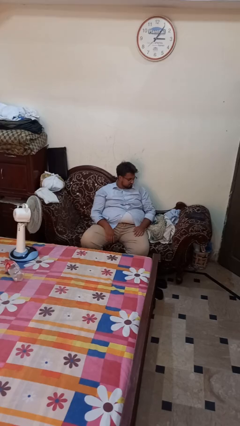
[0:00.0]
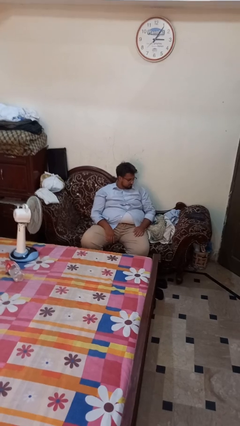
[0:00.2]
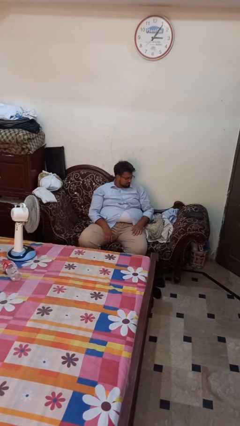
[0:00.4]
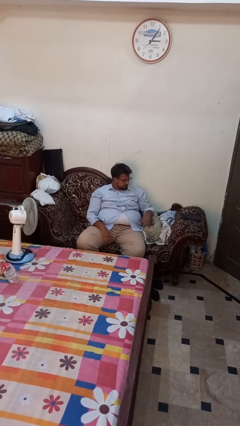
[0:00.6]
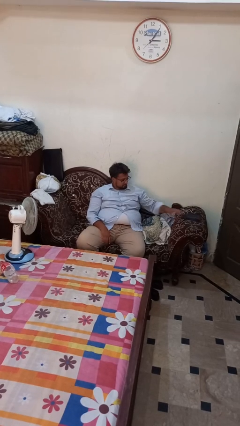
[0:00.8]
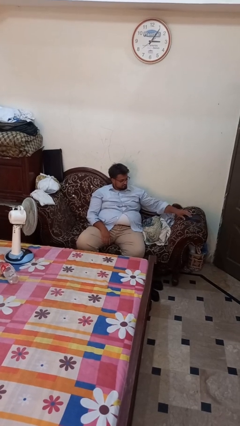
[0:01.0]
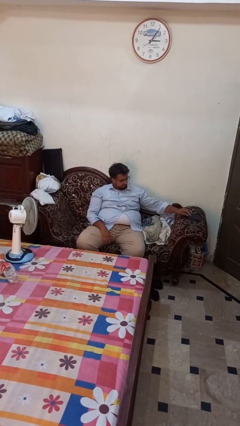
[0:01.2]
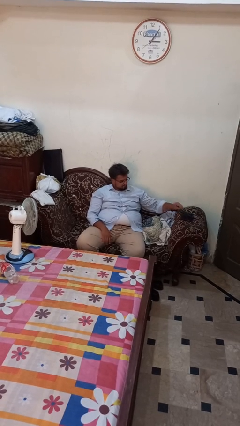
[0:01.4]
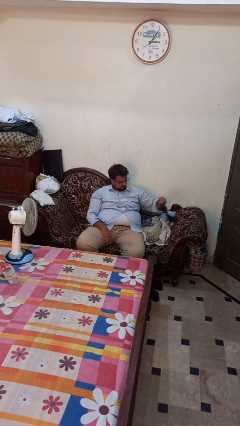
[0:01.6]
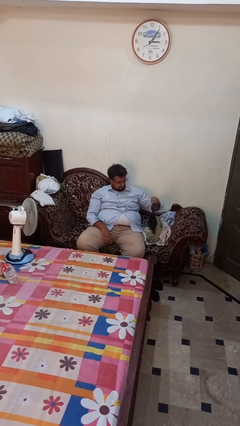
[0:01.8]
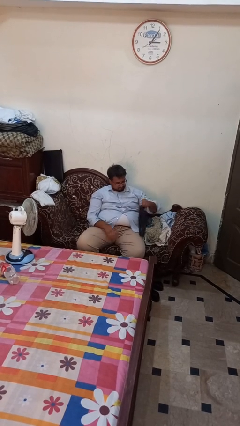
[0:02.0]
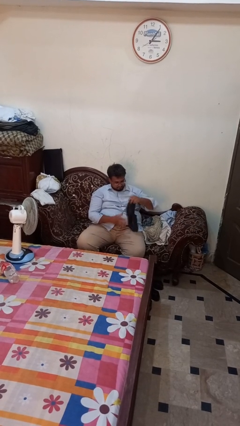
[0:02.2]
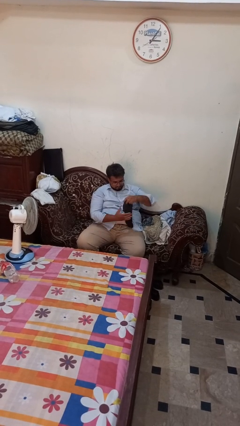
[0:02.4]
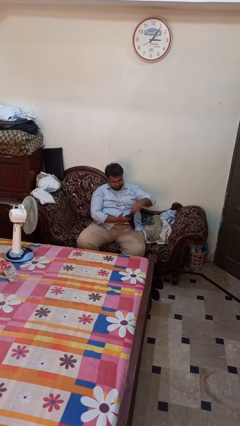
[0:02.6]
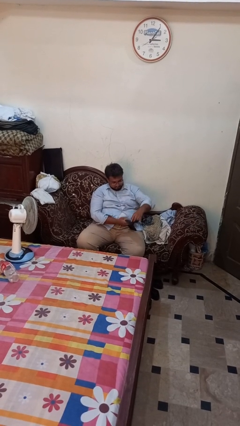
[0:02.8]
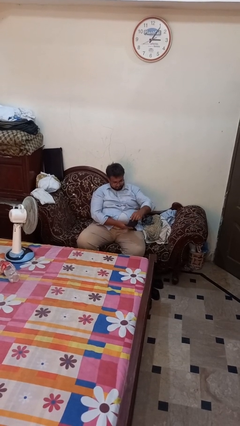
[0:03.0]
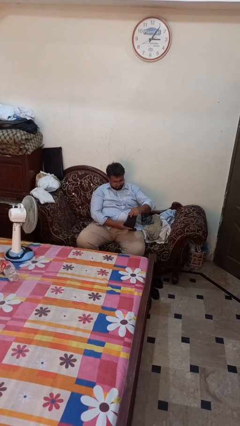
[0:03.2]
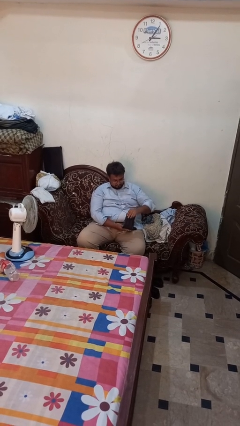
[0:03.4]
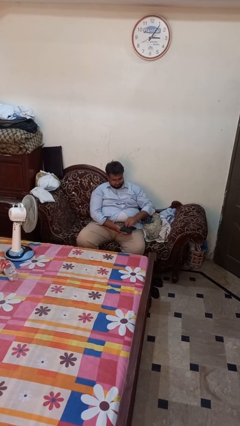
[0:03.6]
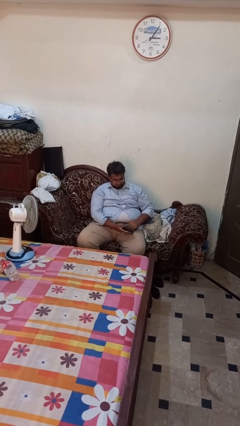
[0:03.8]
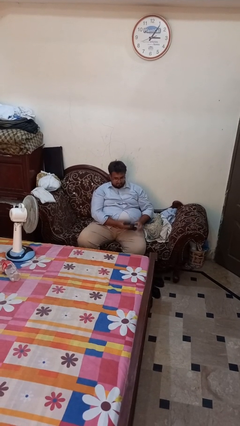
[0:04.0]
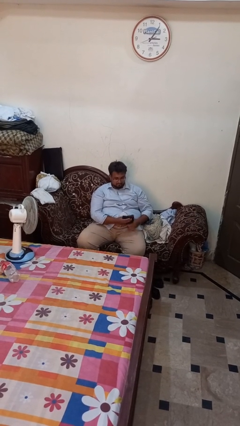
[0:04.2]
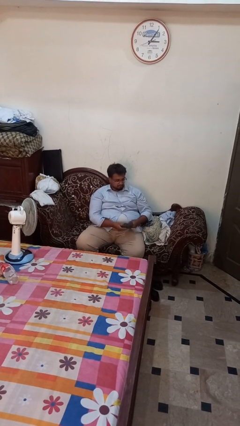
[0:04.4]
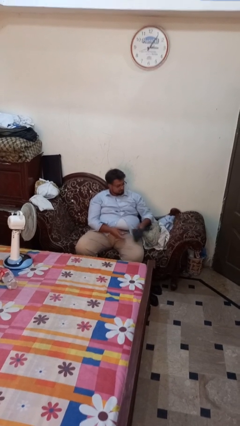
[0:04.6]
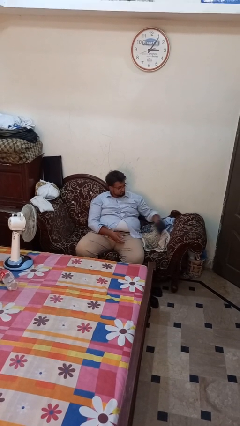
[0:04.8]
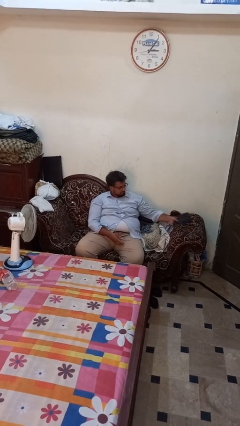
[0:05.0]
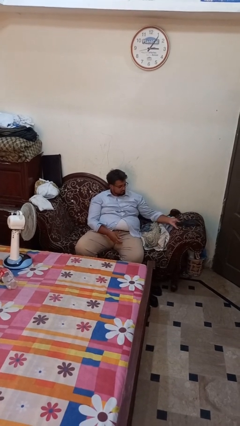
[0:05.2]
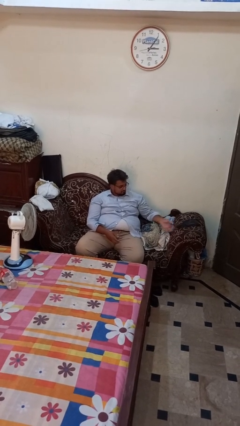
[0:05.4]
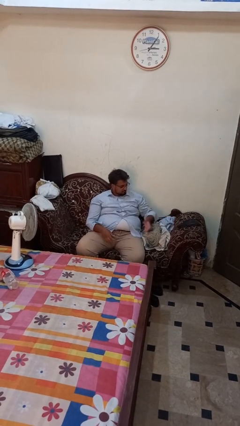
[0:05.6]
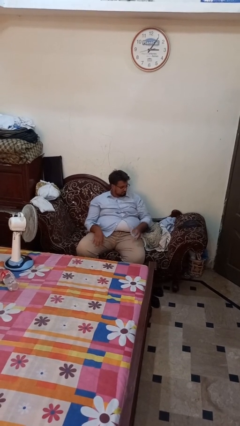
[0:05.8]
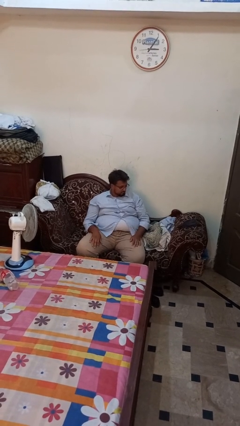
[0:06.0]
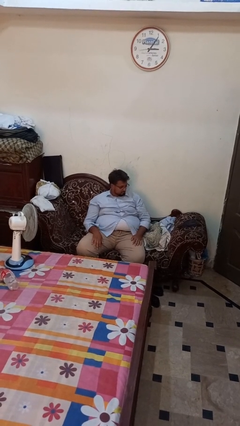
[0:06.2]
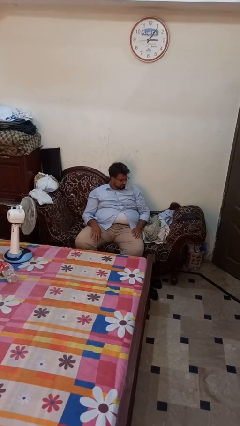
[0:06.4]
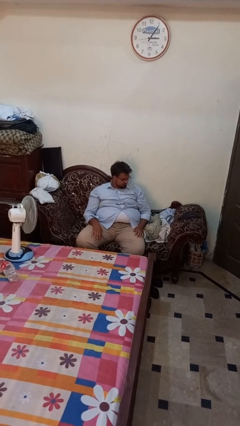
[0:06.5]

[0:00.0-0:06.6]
person folds socks

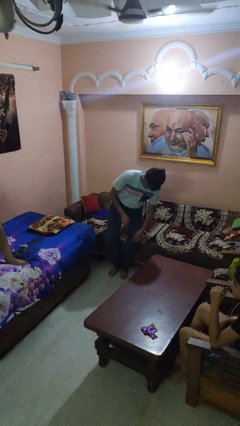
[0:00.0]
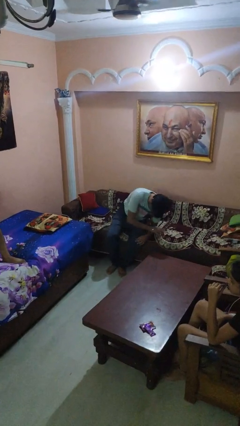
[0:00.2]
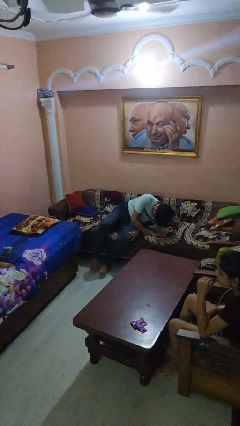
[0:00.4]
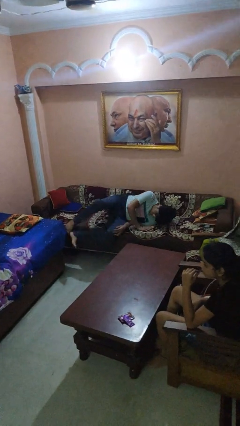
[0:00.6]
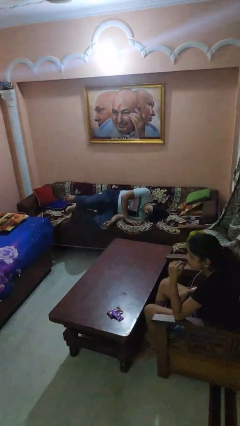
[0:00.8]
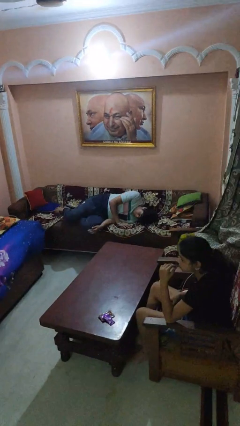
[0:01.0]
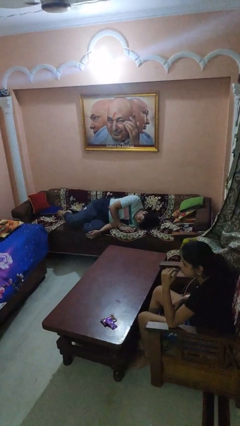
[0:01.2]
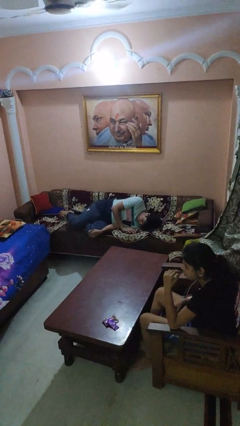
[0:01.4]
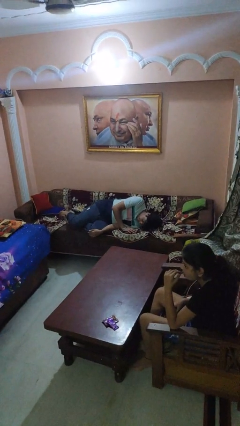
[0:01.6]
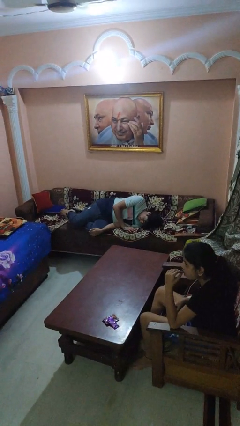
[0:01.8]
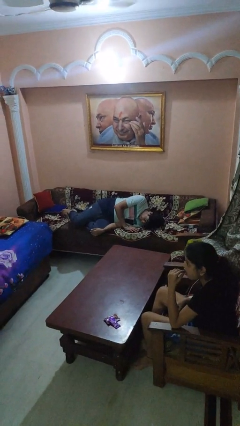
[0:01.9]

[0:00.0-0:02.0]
person lies down on couch

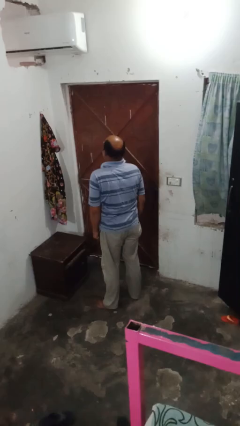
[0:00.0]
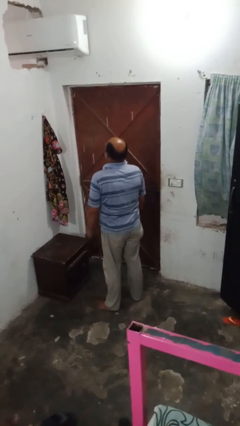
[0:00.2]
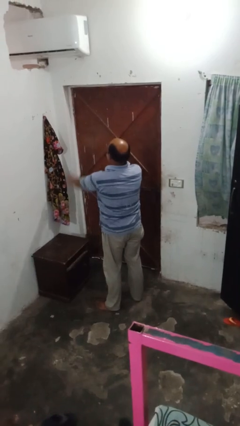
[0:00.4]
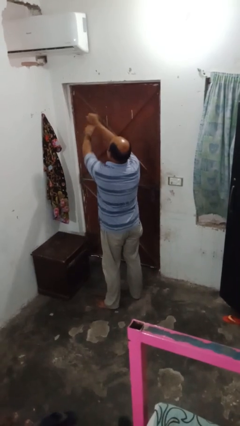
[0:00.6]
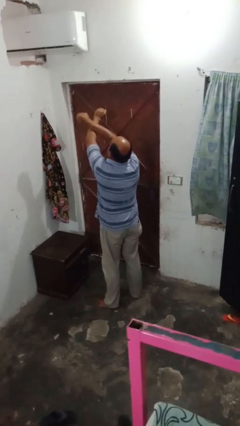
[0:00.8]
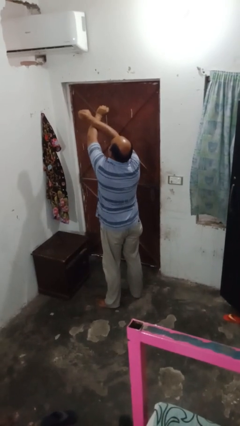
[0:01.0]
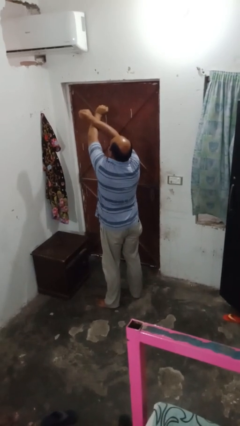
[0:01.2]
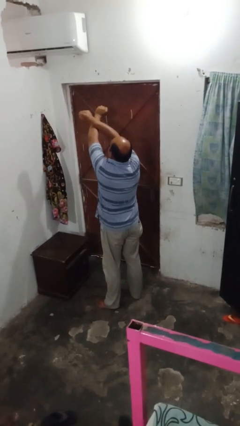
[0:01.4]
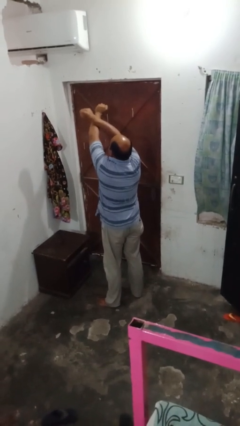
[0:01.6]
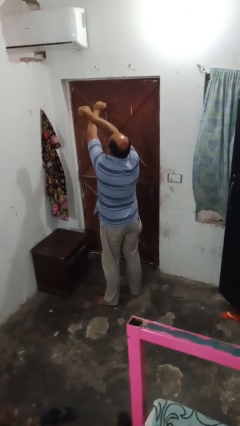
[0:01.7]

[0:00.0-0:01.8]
person gestures arms x

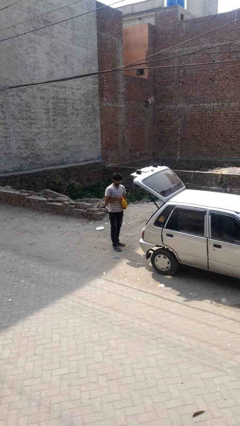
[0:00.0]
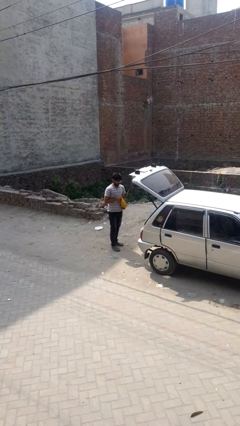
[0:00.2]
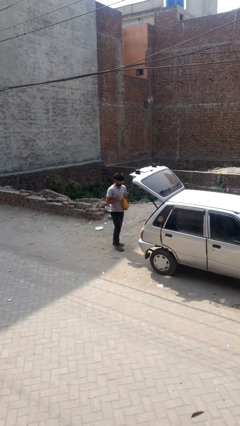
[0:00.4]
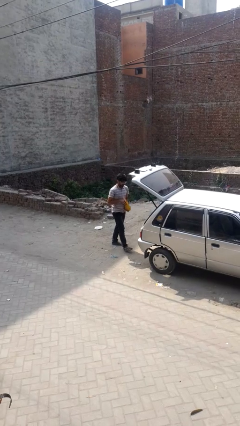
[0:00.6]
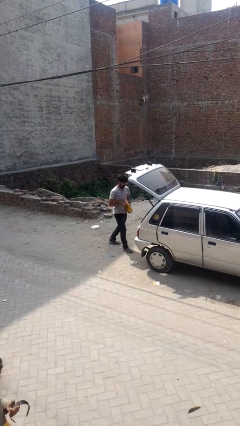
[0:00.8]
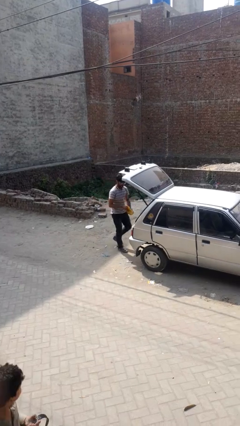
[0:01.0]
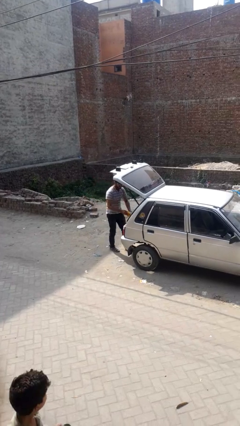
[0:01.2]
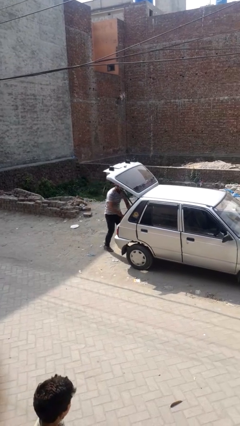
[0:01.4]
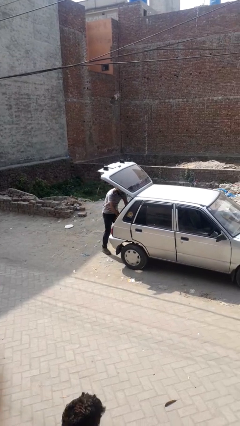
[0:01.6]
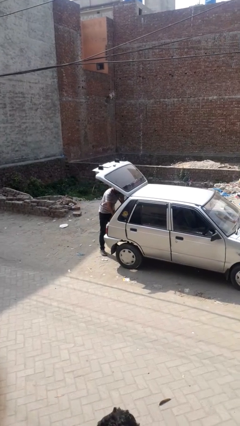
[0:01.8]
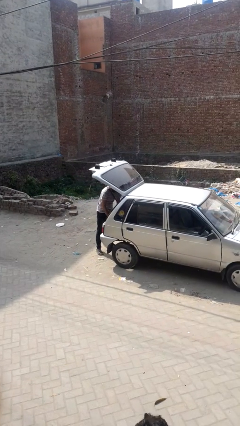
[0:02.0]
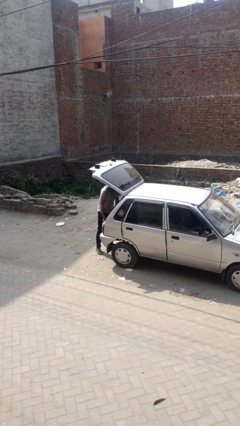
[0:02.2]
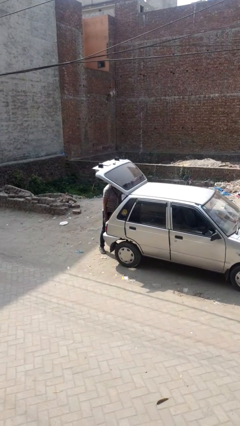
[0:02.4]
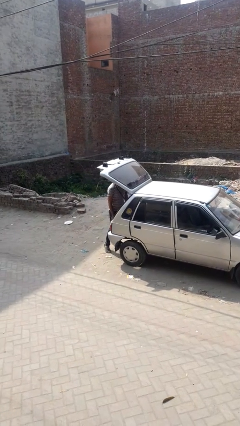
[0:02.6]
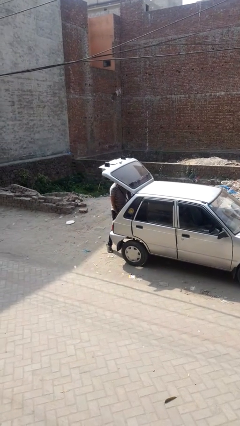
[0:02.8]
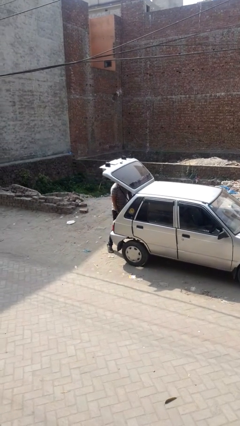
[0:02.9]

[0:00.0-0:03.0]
person loads car

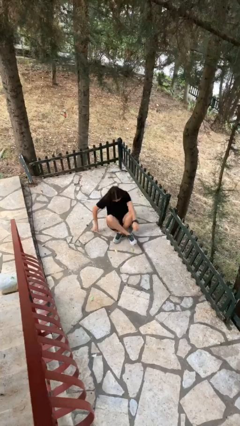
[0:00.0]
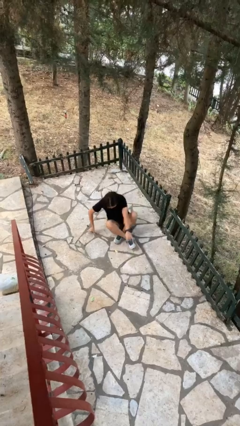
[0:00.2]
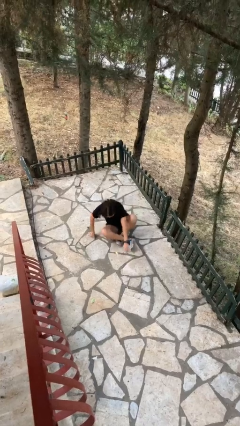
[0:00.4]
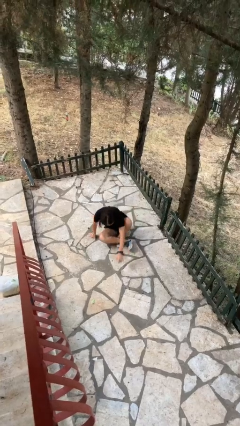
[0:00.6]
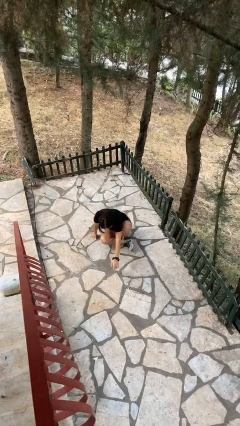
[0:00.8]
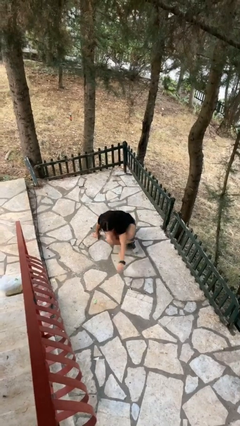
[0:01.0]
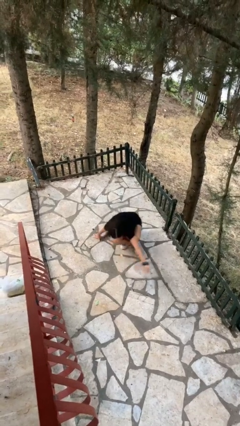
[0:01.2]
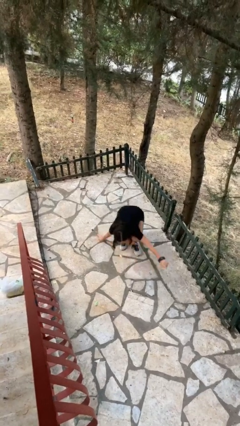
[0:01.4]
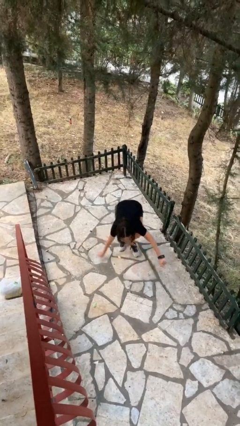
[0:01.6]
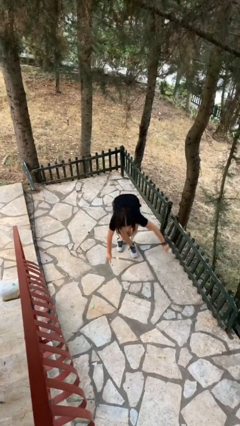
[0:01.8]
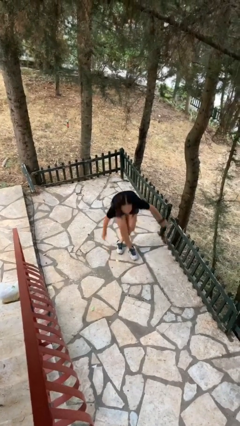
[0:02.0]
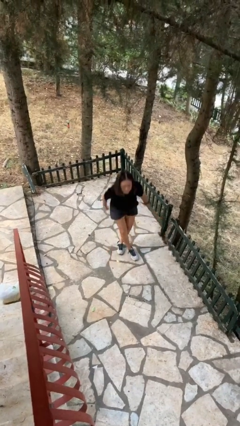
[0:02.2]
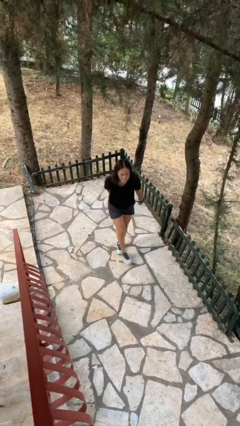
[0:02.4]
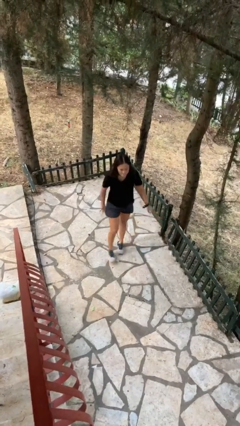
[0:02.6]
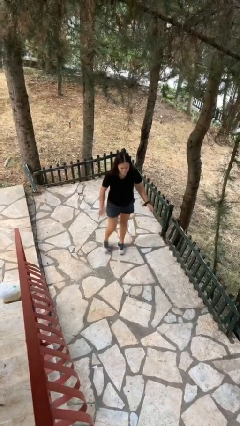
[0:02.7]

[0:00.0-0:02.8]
person stands up from floor

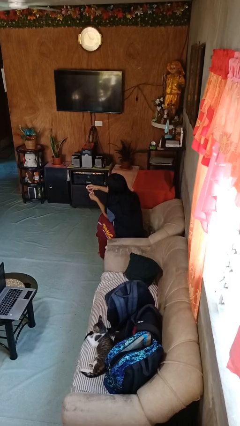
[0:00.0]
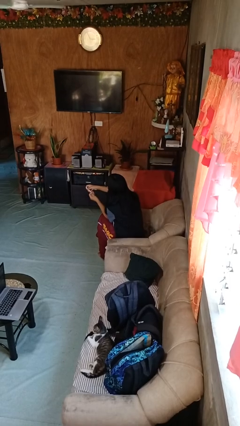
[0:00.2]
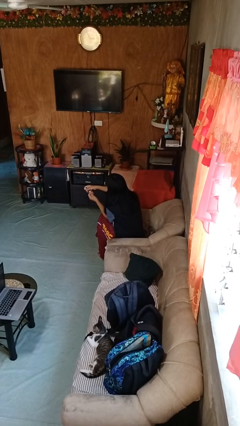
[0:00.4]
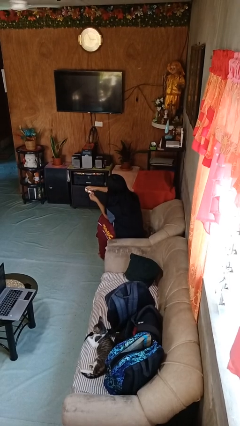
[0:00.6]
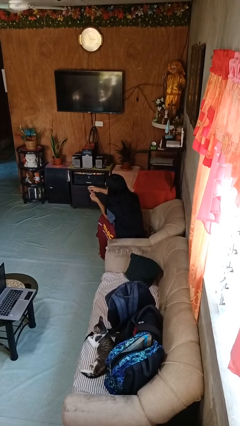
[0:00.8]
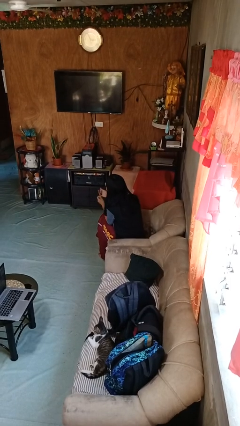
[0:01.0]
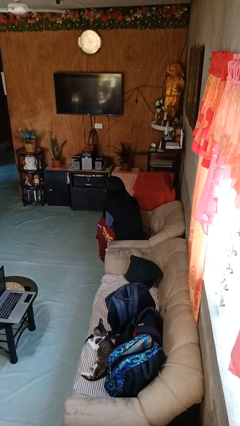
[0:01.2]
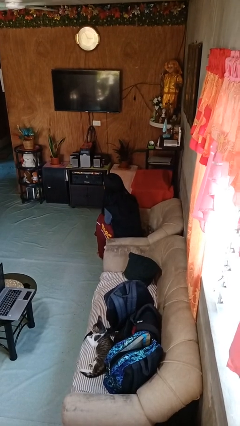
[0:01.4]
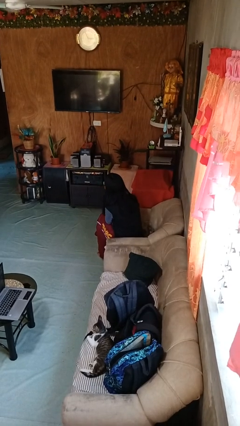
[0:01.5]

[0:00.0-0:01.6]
person clips fingernails
